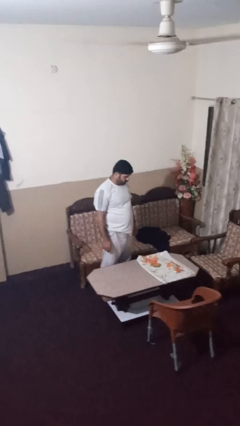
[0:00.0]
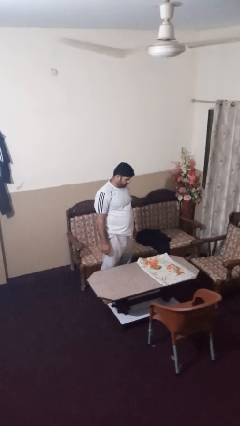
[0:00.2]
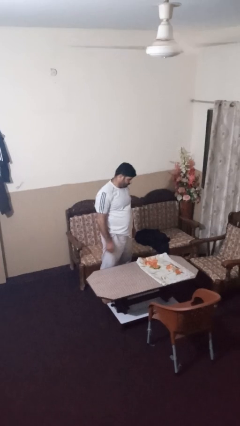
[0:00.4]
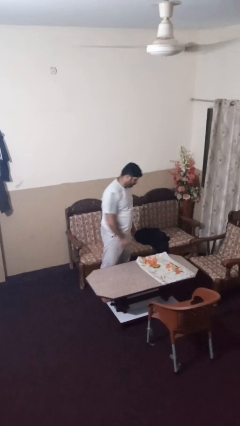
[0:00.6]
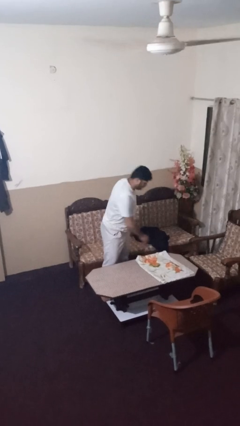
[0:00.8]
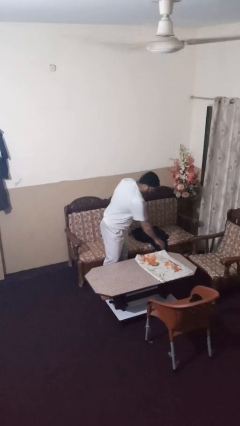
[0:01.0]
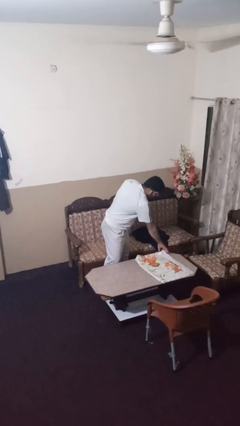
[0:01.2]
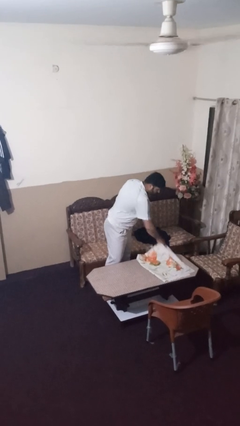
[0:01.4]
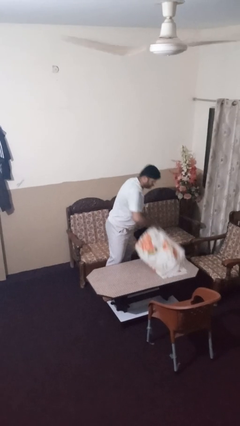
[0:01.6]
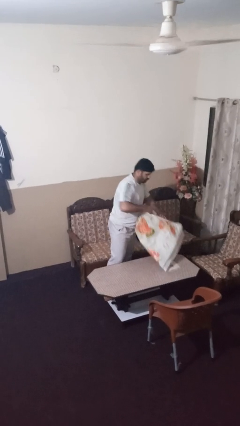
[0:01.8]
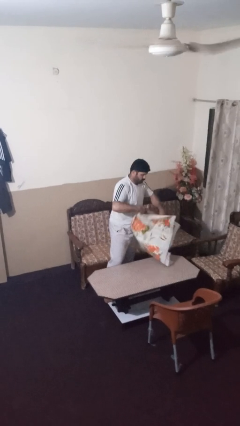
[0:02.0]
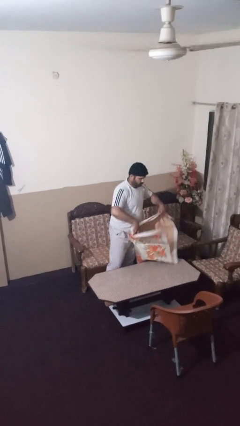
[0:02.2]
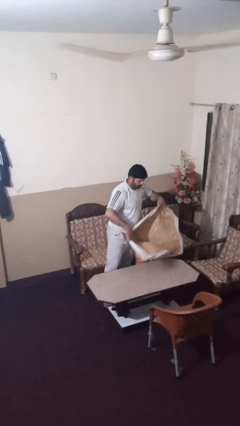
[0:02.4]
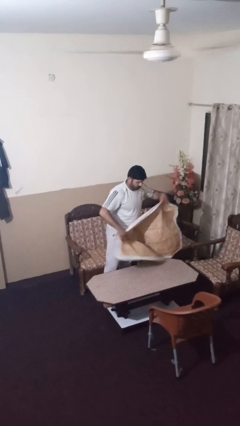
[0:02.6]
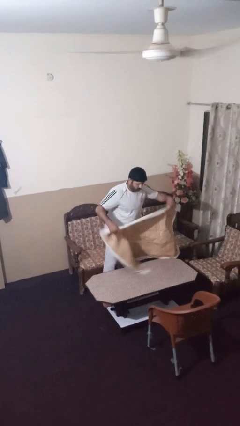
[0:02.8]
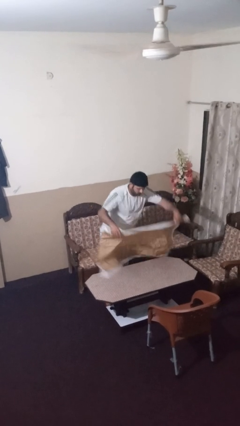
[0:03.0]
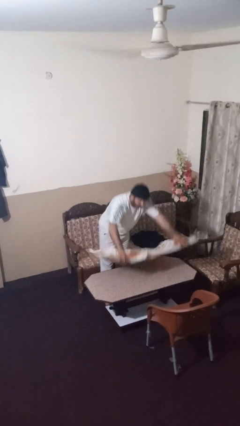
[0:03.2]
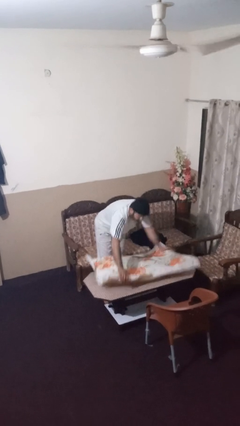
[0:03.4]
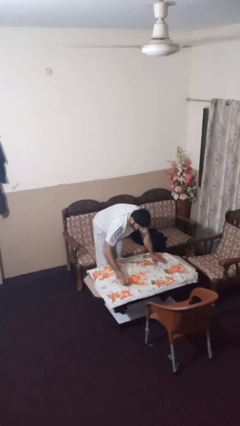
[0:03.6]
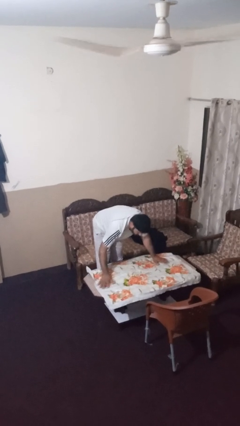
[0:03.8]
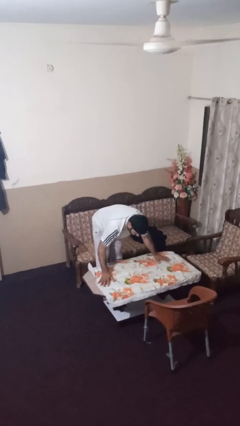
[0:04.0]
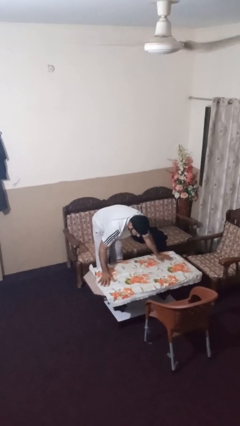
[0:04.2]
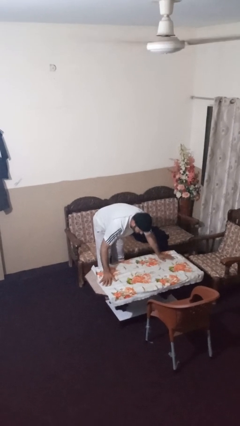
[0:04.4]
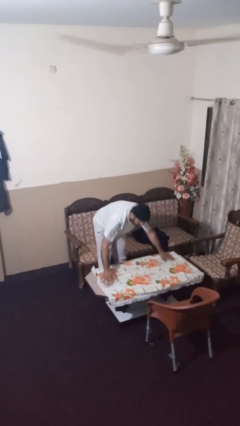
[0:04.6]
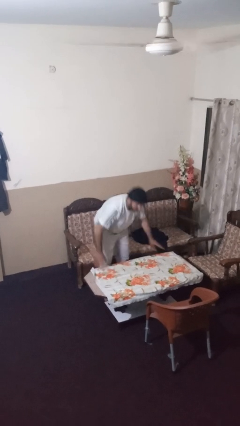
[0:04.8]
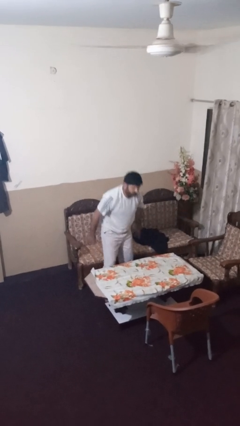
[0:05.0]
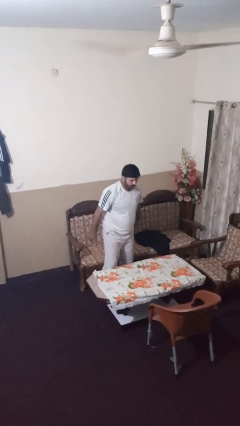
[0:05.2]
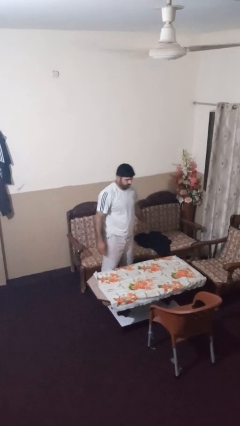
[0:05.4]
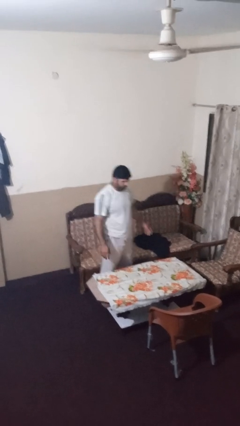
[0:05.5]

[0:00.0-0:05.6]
person spreads tablecloth

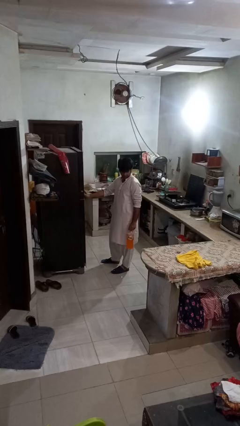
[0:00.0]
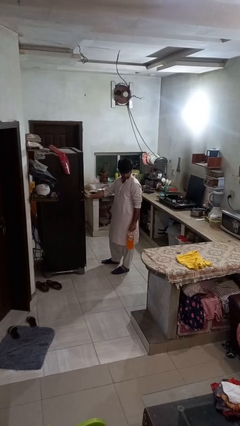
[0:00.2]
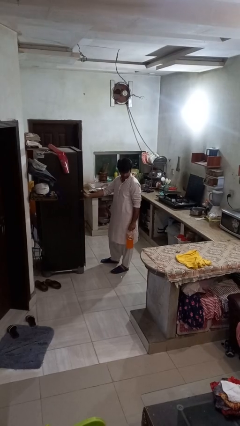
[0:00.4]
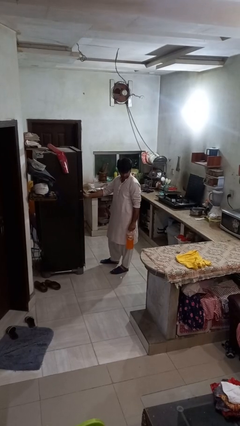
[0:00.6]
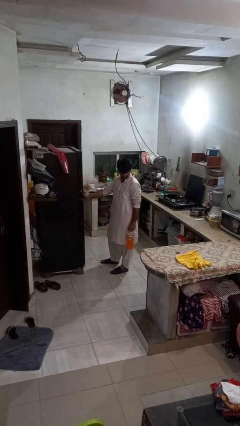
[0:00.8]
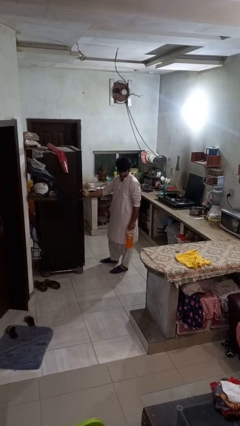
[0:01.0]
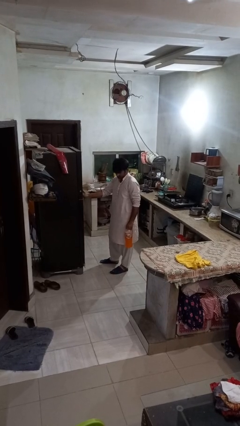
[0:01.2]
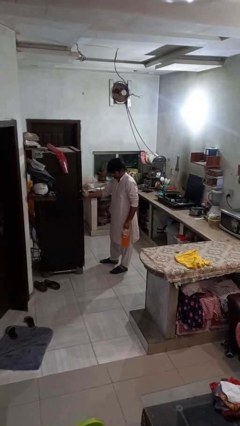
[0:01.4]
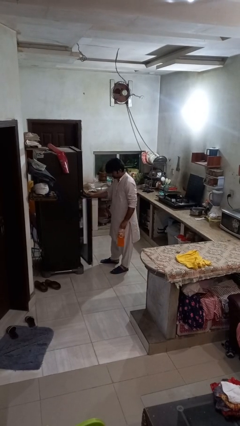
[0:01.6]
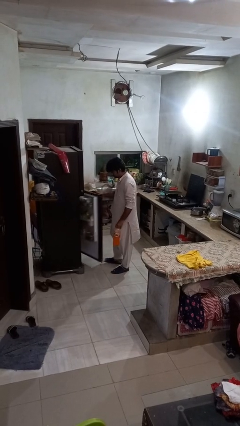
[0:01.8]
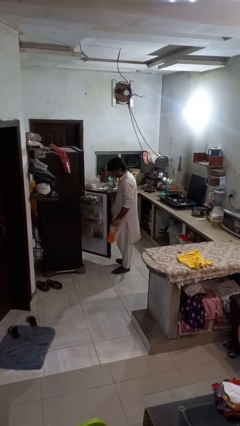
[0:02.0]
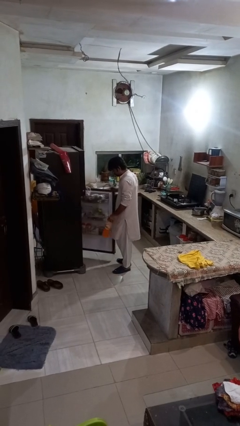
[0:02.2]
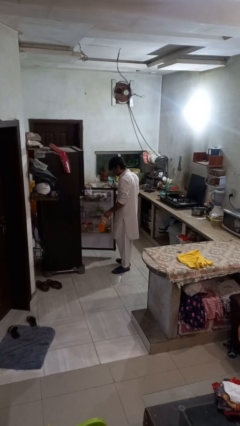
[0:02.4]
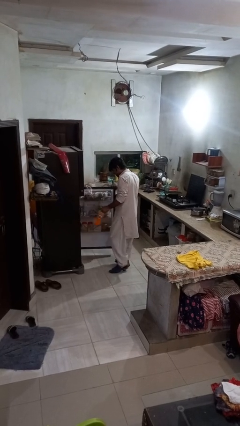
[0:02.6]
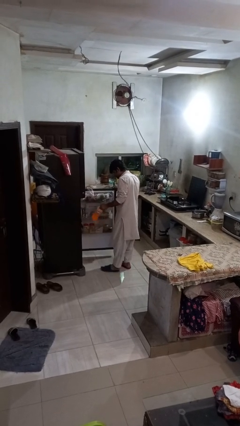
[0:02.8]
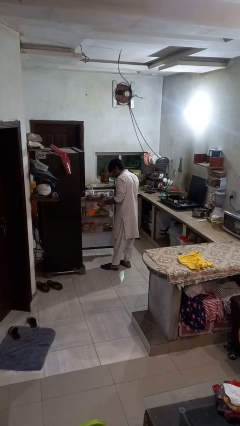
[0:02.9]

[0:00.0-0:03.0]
person opens refrigerator

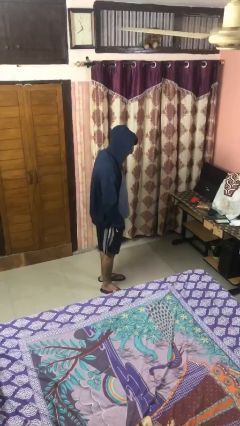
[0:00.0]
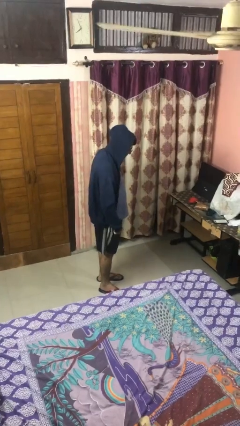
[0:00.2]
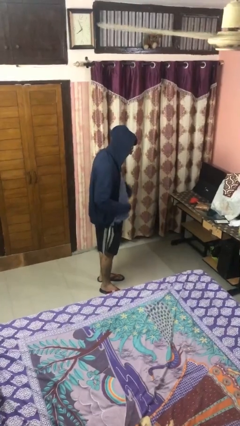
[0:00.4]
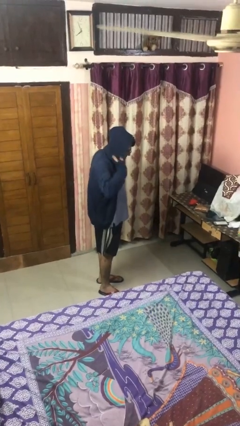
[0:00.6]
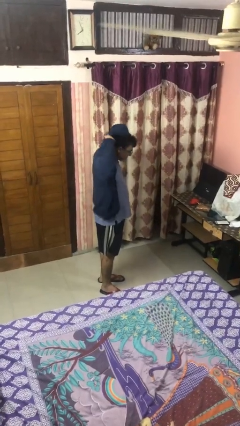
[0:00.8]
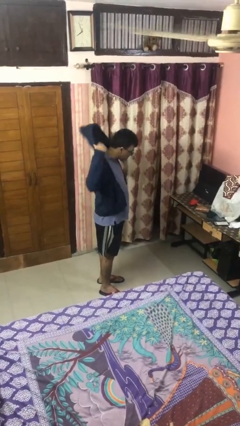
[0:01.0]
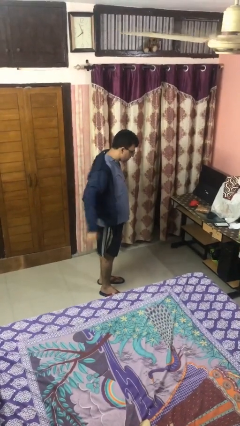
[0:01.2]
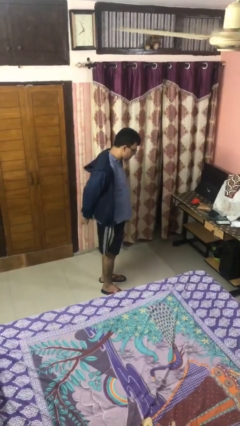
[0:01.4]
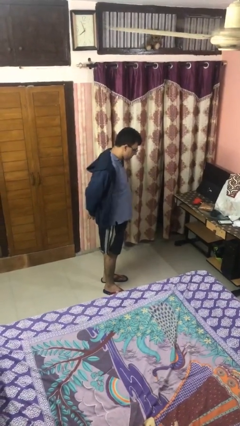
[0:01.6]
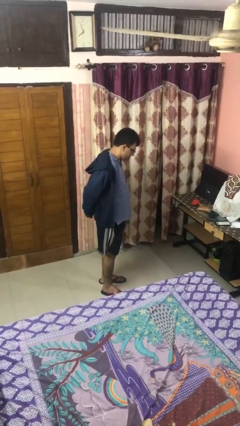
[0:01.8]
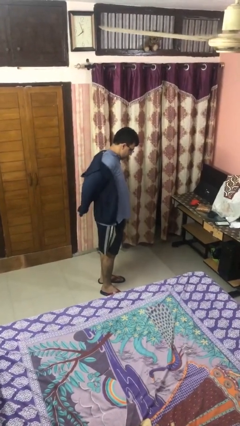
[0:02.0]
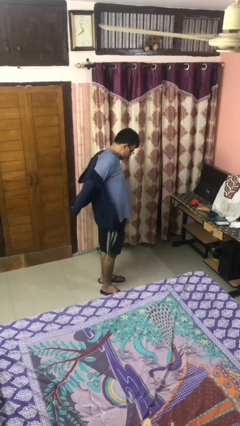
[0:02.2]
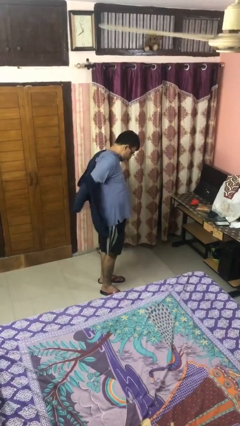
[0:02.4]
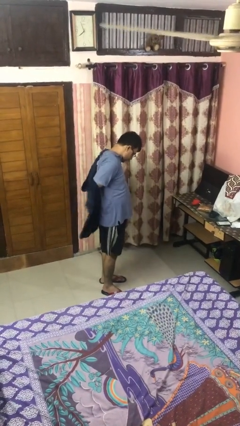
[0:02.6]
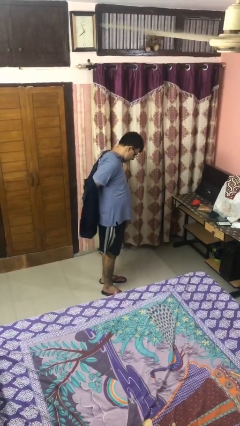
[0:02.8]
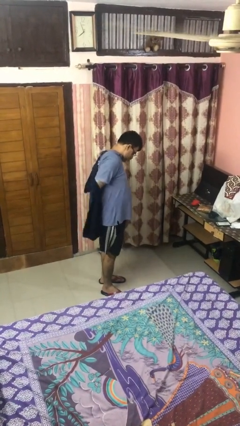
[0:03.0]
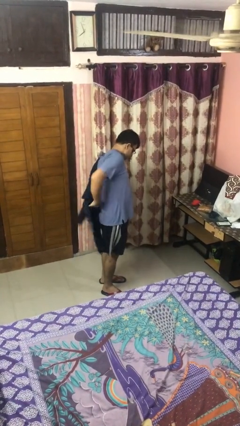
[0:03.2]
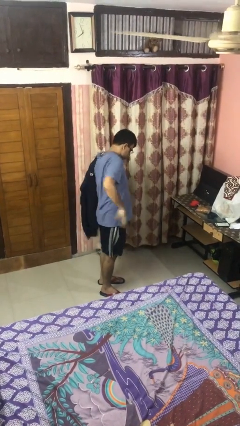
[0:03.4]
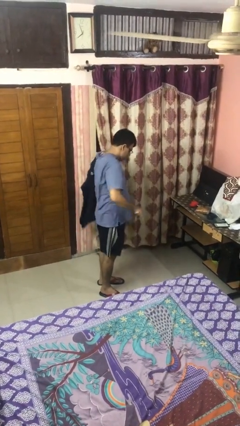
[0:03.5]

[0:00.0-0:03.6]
person takes off hoodie

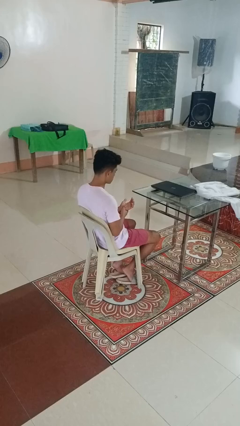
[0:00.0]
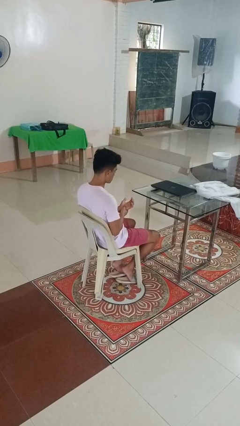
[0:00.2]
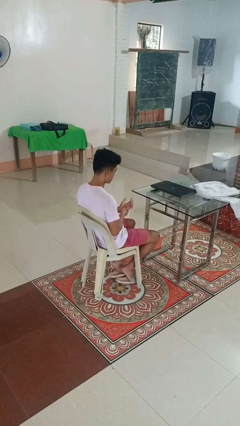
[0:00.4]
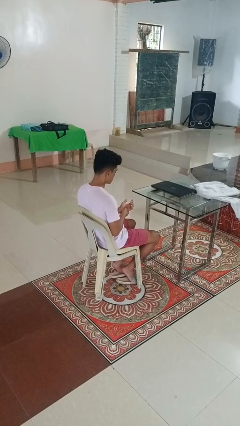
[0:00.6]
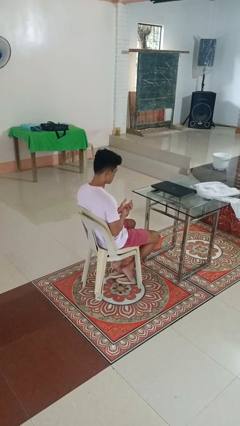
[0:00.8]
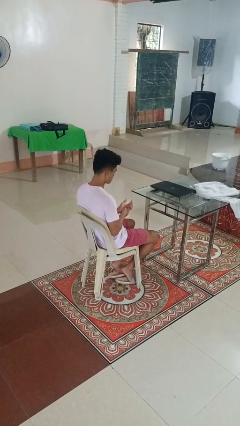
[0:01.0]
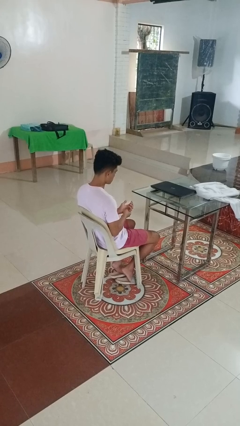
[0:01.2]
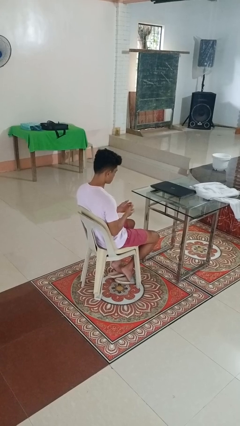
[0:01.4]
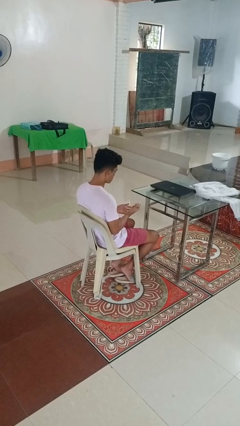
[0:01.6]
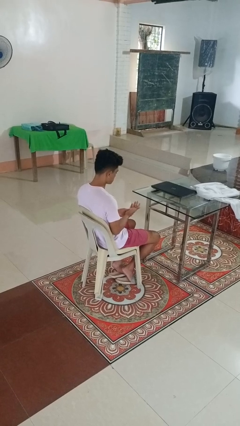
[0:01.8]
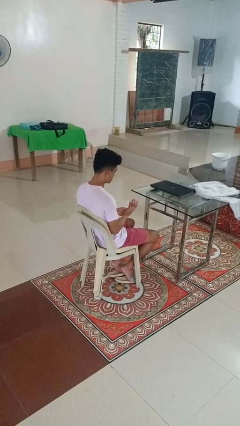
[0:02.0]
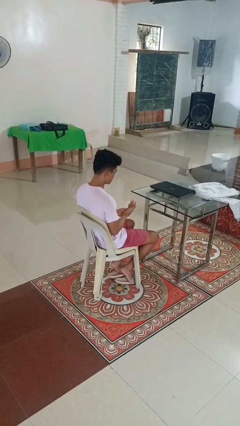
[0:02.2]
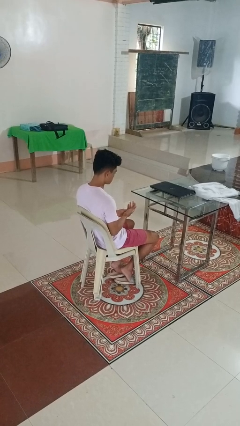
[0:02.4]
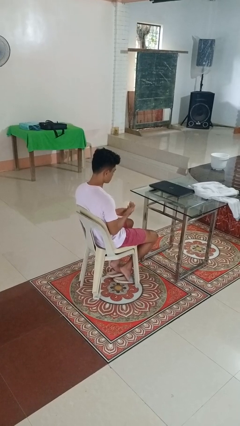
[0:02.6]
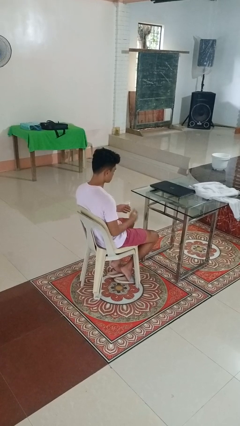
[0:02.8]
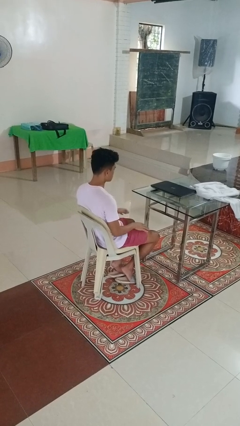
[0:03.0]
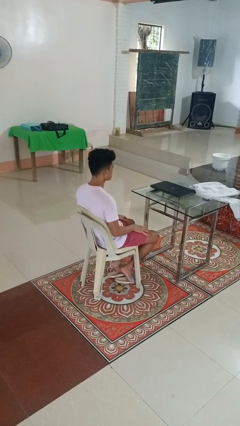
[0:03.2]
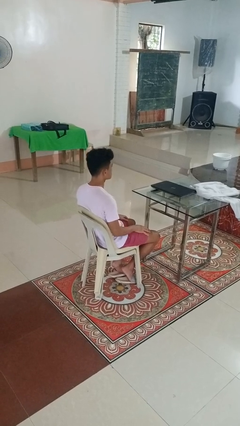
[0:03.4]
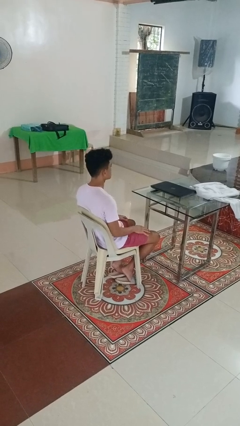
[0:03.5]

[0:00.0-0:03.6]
person looks at hands in lap

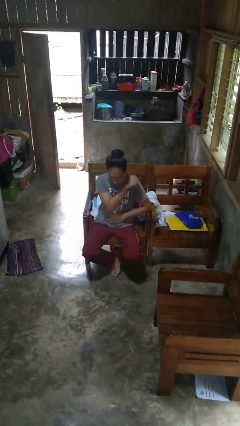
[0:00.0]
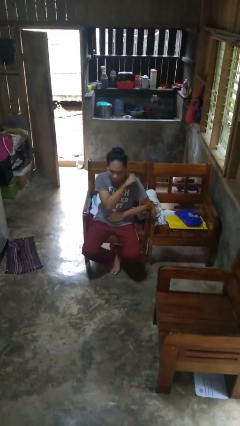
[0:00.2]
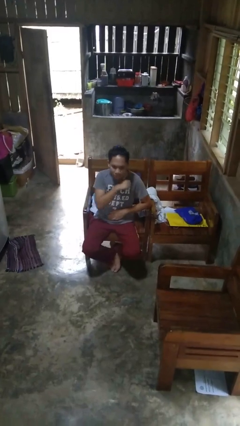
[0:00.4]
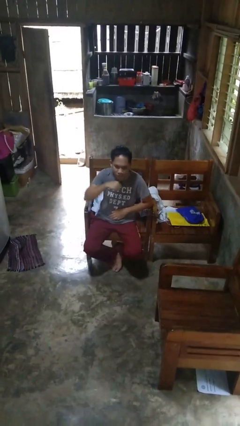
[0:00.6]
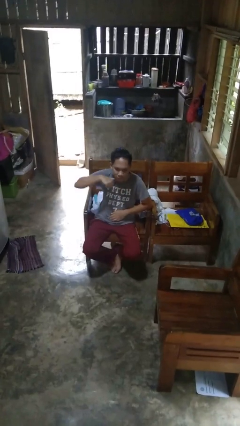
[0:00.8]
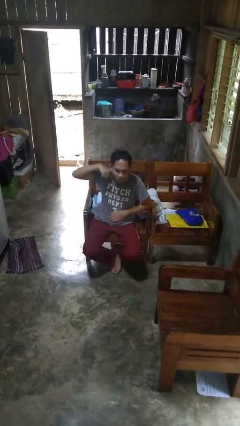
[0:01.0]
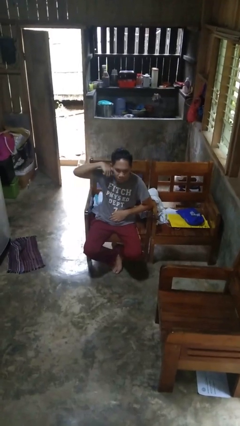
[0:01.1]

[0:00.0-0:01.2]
person gestures cut
